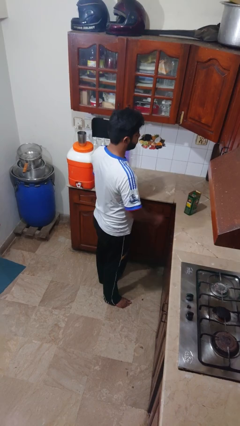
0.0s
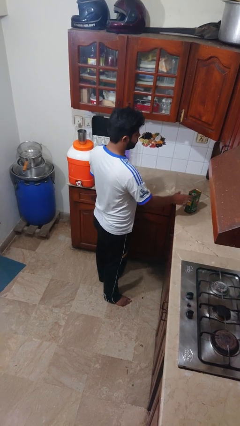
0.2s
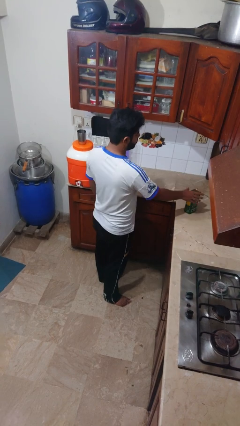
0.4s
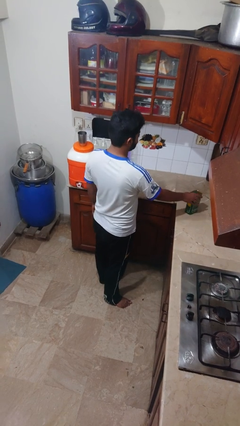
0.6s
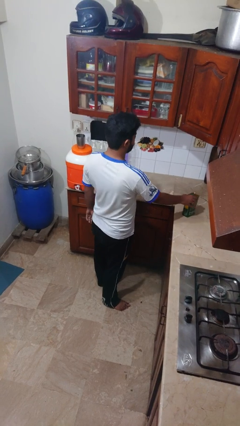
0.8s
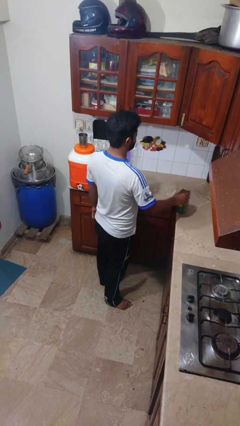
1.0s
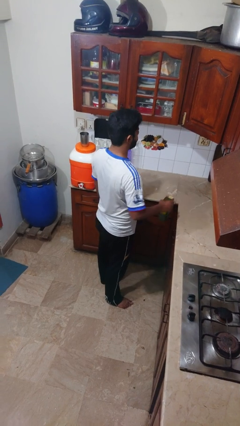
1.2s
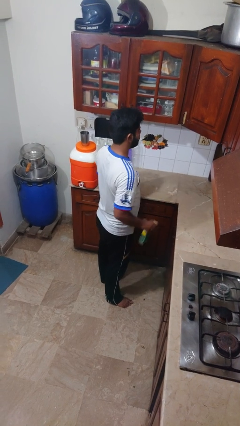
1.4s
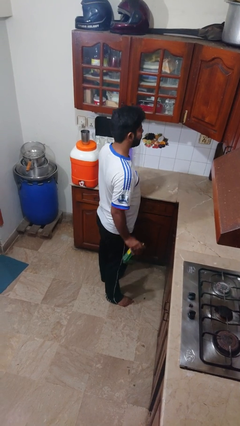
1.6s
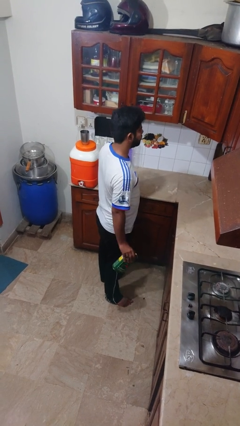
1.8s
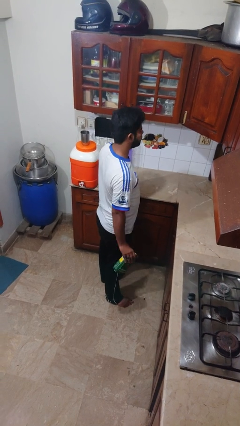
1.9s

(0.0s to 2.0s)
person picks up object from countertop

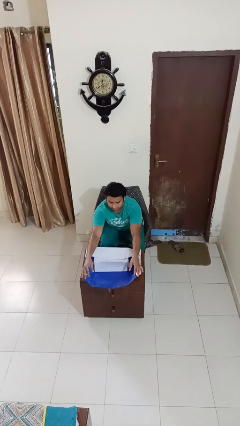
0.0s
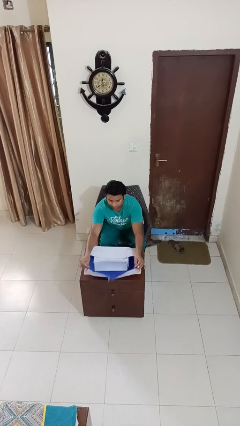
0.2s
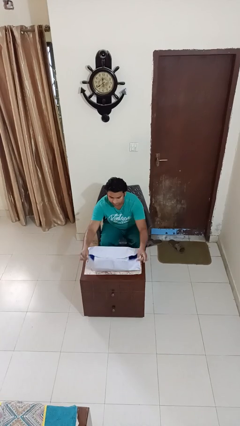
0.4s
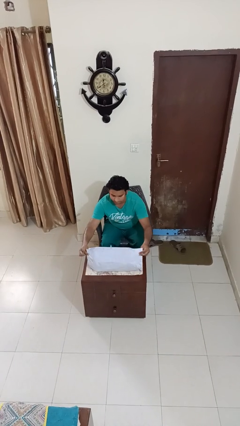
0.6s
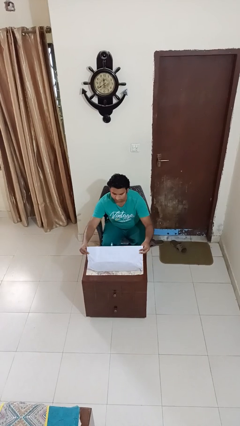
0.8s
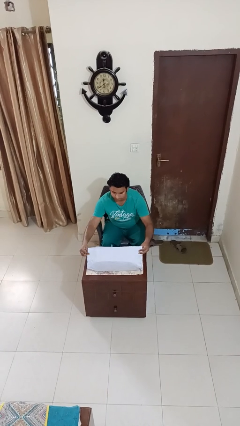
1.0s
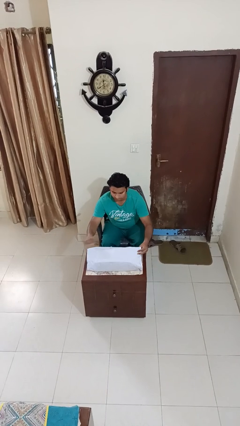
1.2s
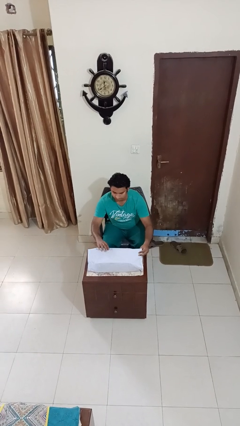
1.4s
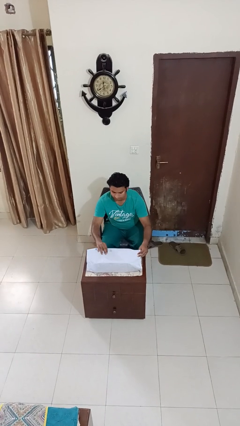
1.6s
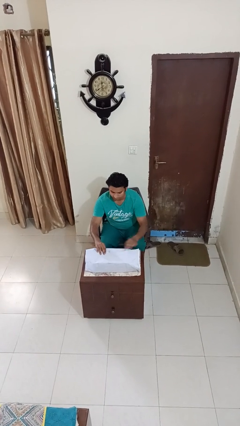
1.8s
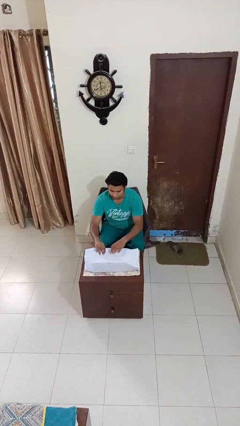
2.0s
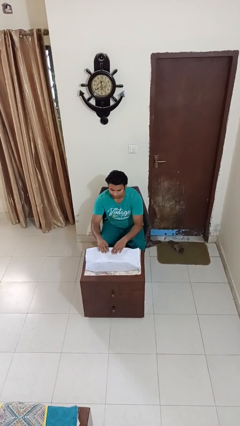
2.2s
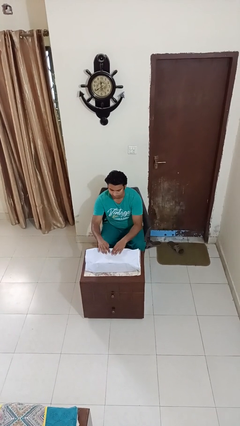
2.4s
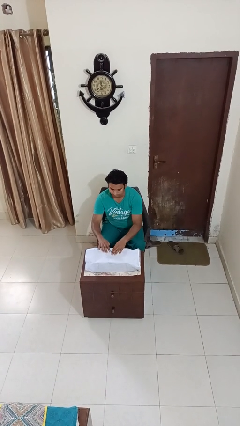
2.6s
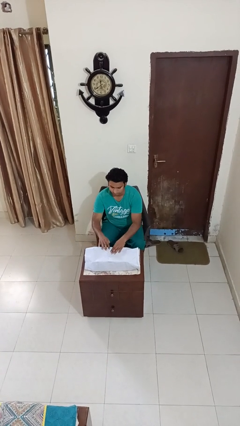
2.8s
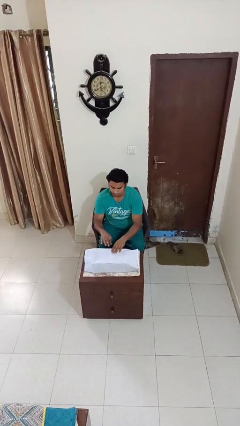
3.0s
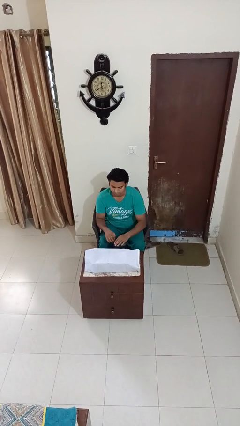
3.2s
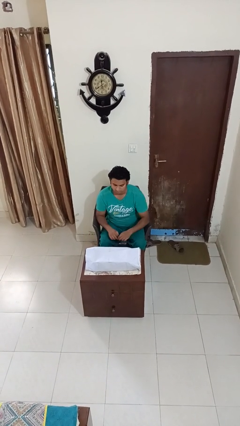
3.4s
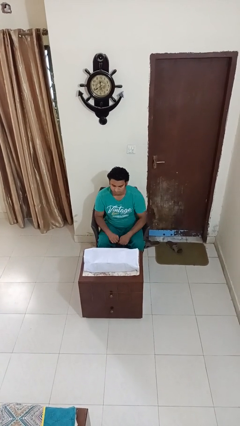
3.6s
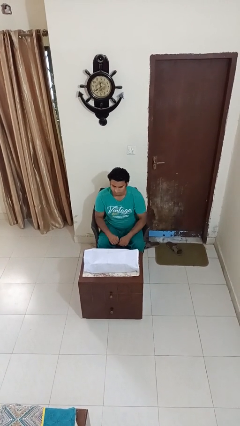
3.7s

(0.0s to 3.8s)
person wraps box

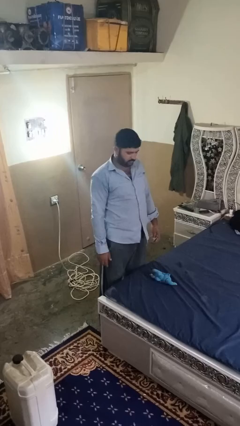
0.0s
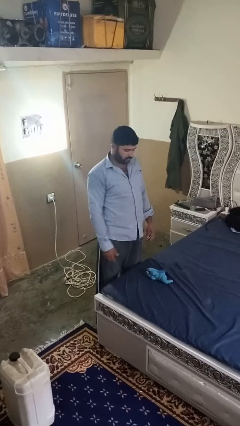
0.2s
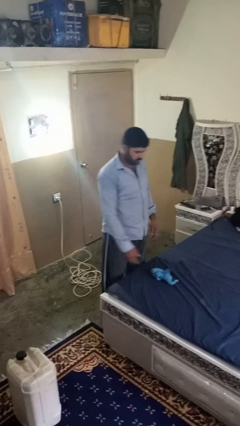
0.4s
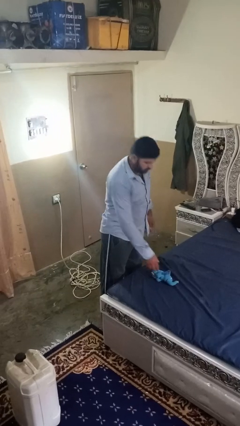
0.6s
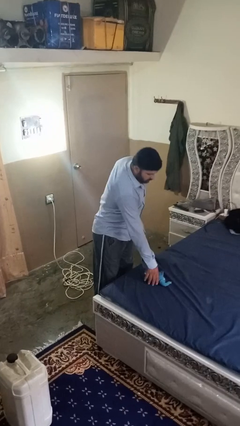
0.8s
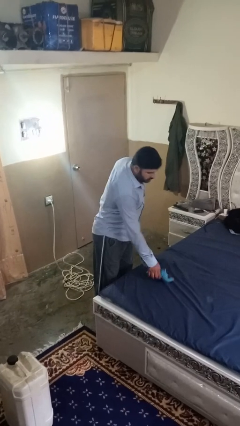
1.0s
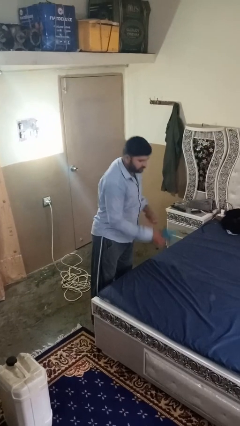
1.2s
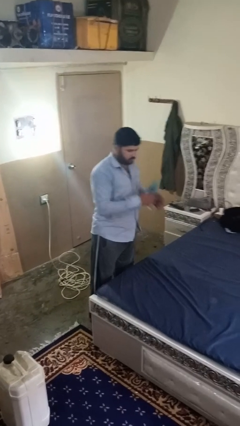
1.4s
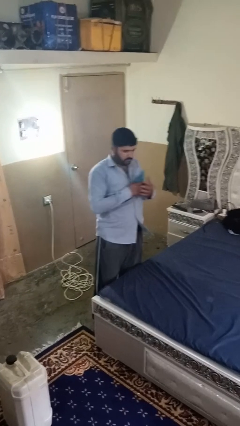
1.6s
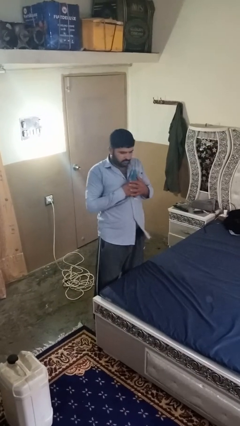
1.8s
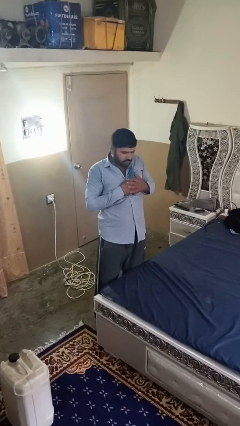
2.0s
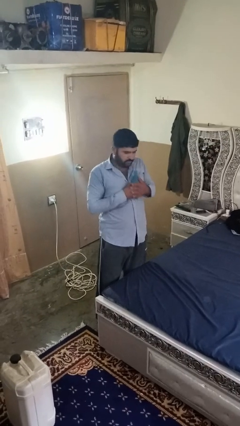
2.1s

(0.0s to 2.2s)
person hugs stuffed animal

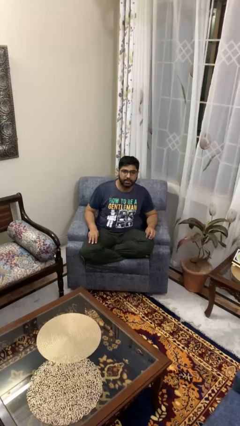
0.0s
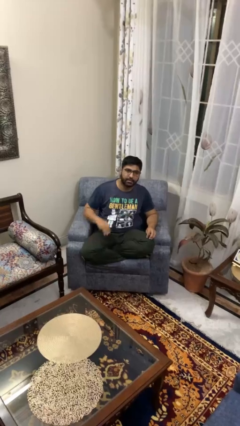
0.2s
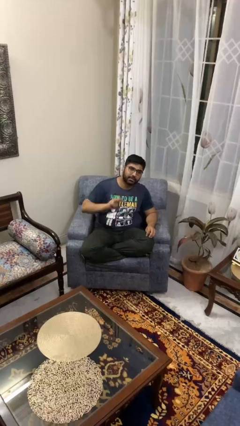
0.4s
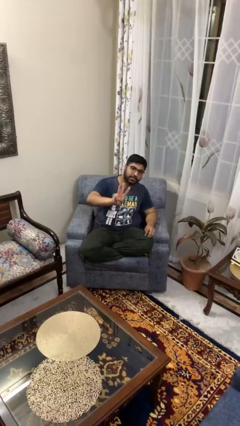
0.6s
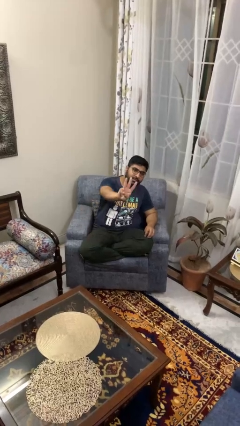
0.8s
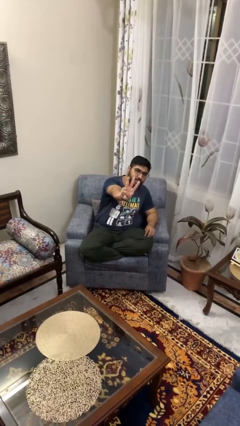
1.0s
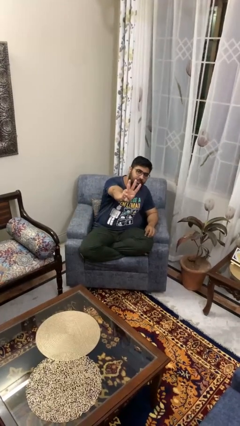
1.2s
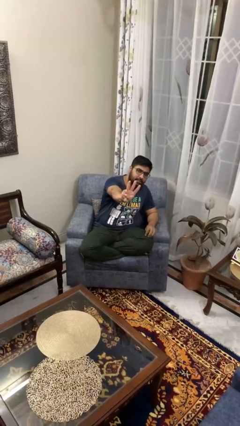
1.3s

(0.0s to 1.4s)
person gestures number three

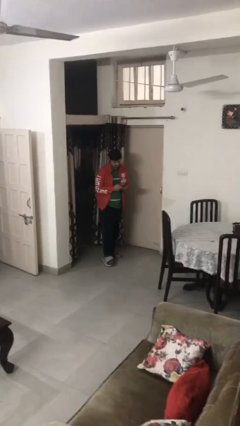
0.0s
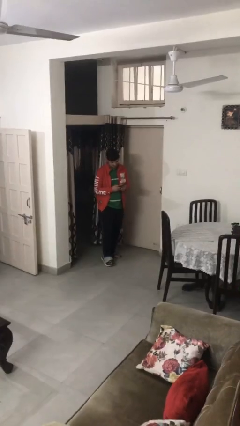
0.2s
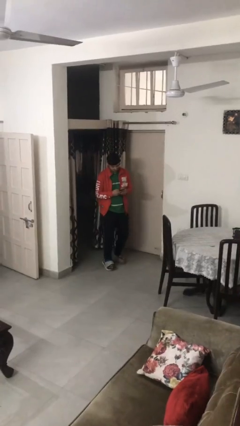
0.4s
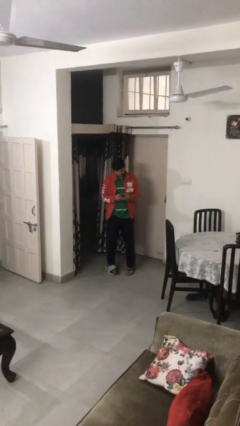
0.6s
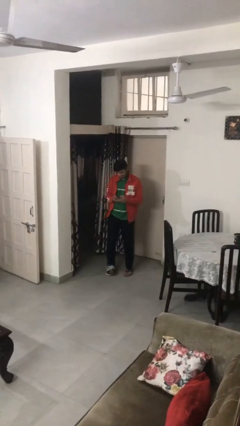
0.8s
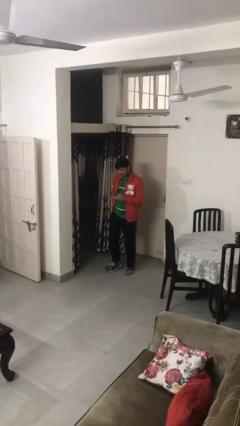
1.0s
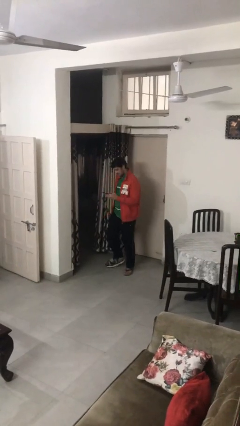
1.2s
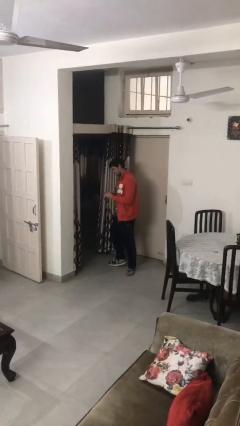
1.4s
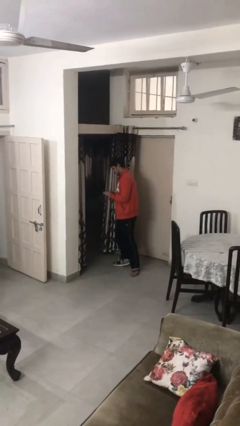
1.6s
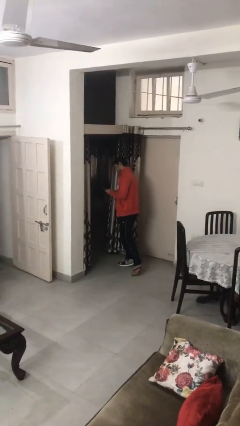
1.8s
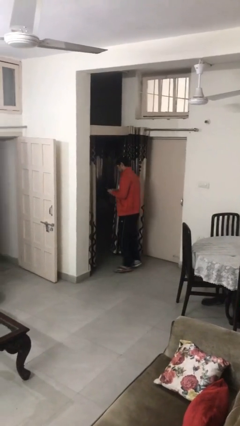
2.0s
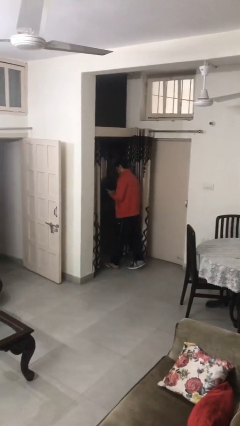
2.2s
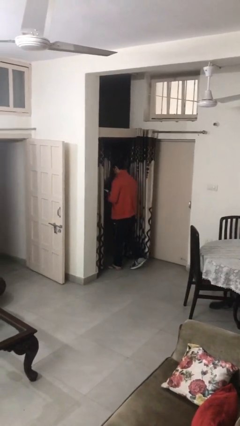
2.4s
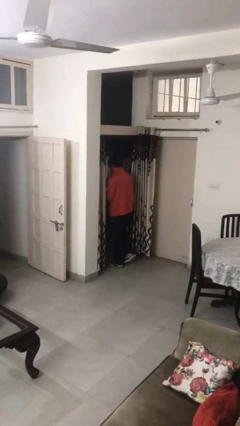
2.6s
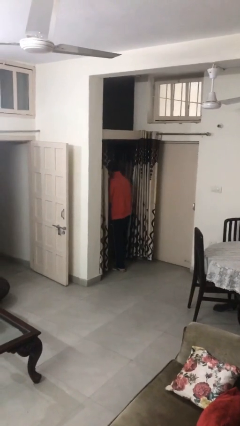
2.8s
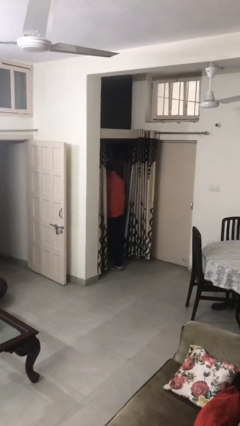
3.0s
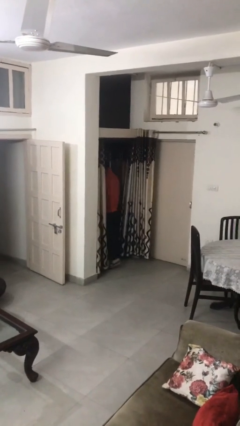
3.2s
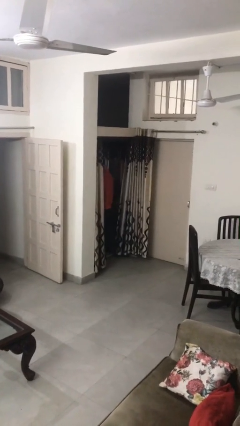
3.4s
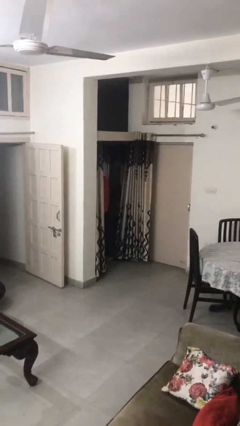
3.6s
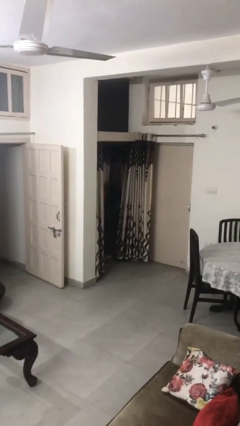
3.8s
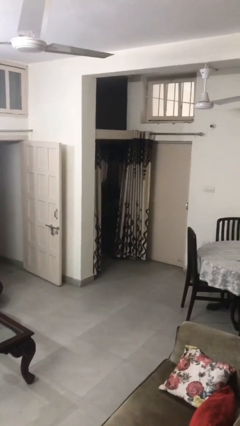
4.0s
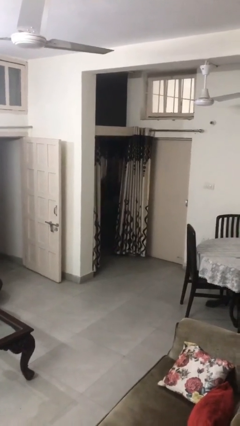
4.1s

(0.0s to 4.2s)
person exits scene through structure

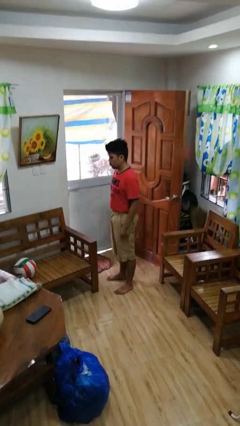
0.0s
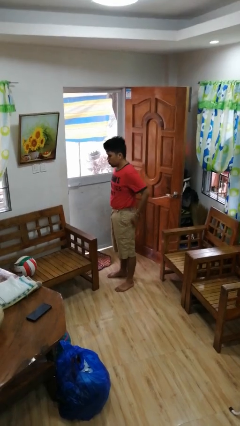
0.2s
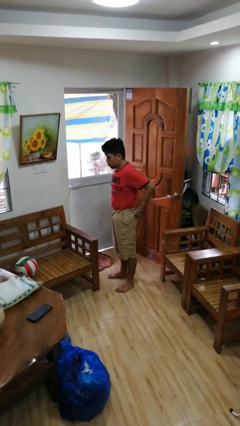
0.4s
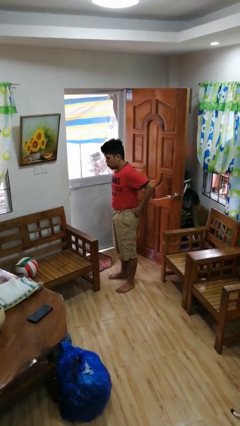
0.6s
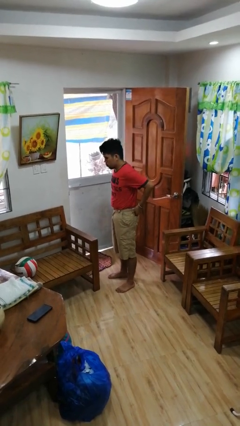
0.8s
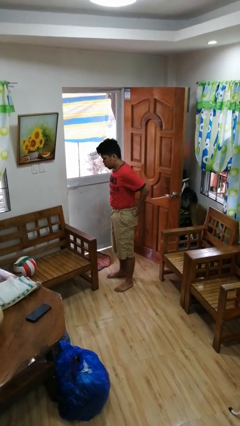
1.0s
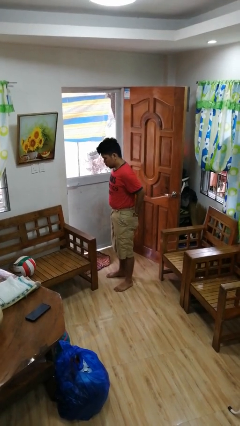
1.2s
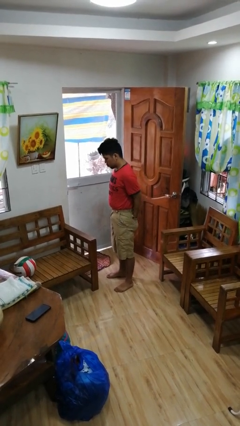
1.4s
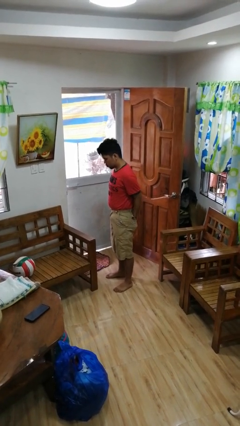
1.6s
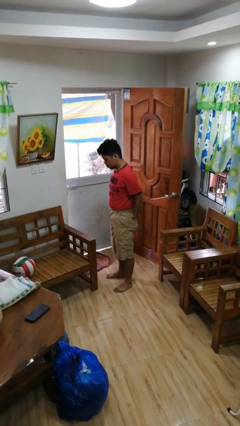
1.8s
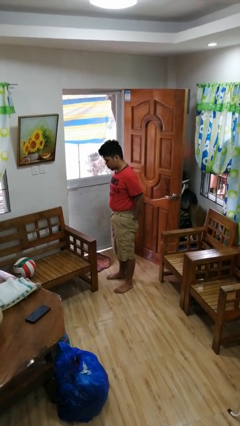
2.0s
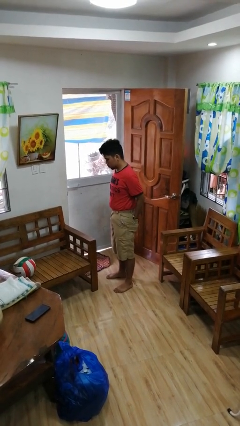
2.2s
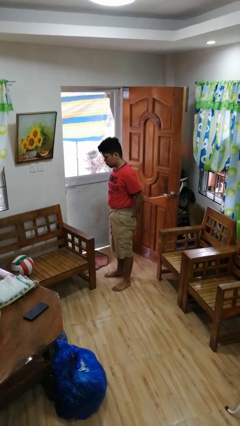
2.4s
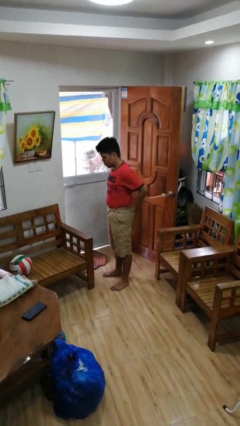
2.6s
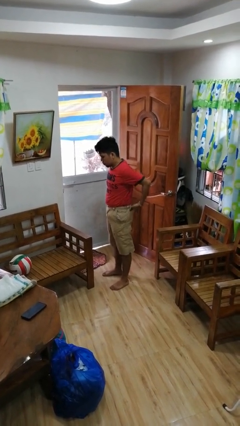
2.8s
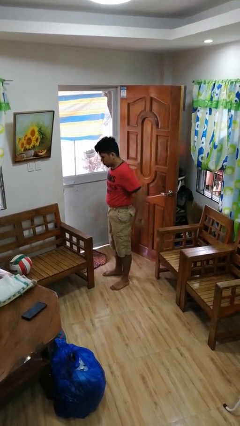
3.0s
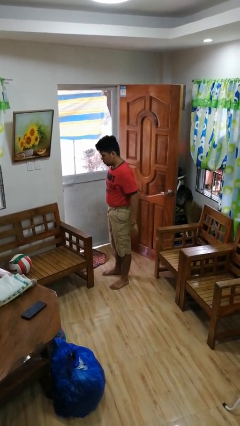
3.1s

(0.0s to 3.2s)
person puts hands in back pockets

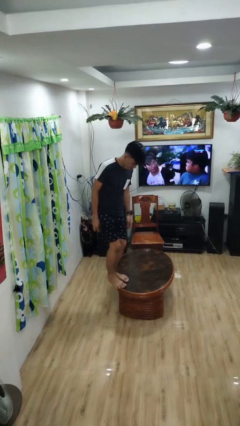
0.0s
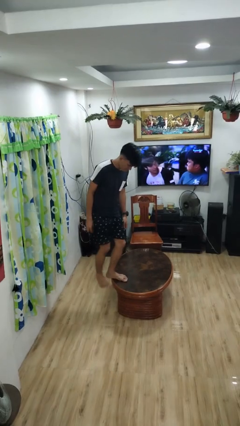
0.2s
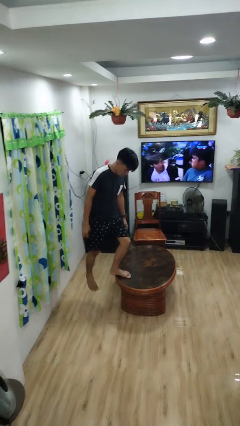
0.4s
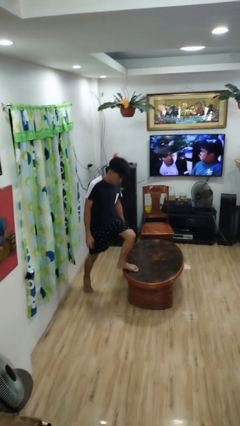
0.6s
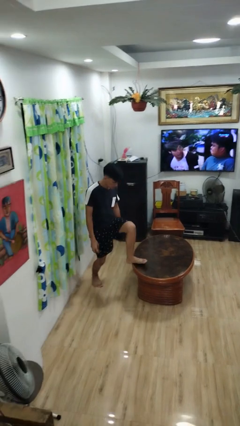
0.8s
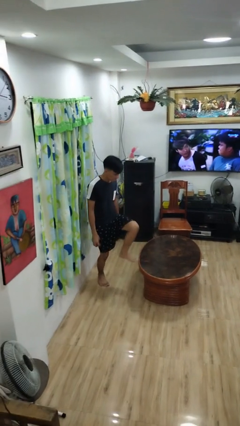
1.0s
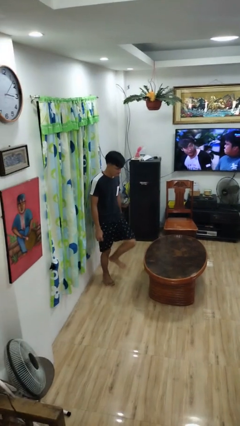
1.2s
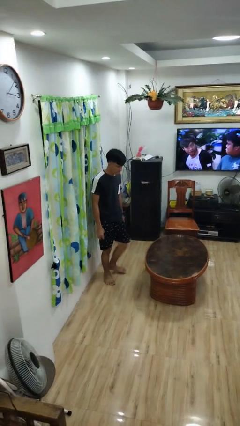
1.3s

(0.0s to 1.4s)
person climbs off table
